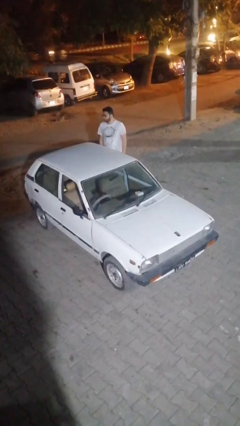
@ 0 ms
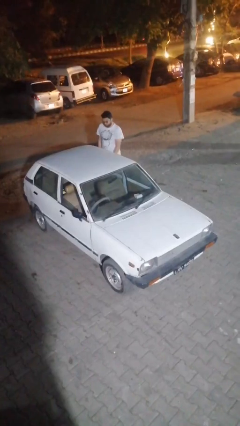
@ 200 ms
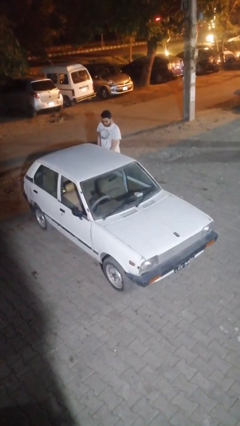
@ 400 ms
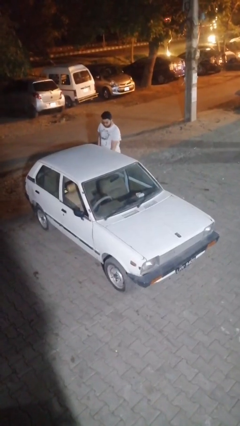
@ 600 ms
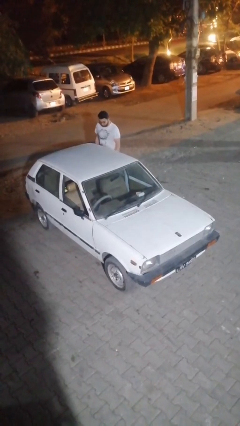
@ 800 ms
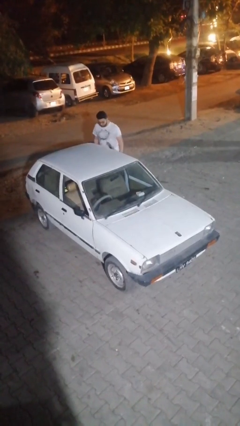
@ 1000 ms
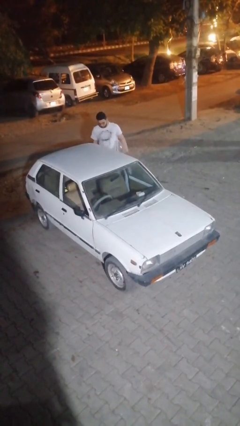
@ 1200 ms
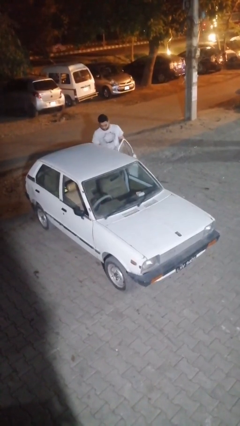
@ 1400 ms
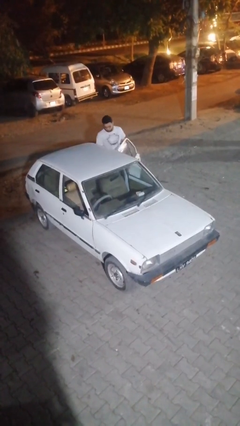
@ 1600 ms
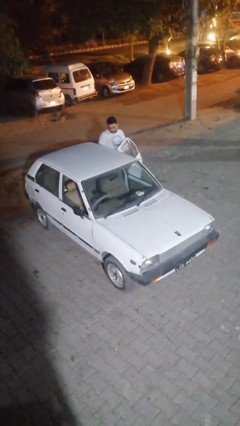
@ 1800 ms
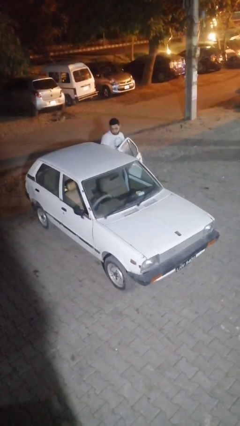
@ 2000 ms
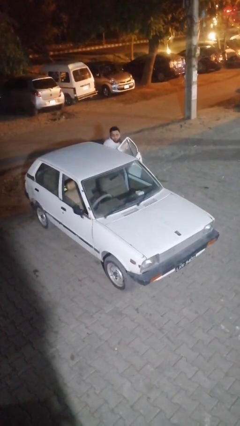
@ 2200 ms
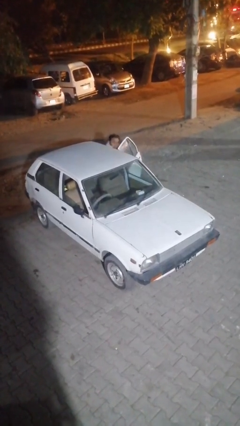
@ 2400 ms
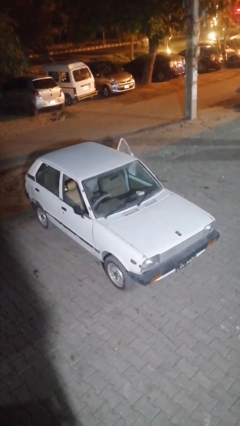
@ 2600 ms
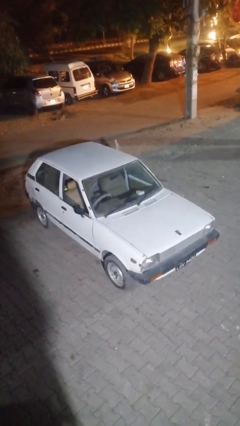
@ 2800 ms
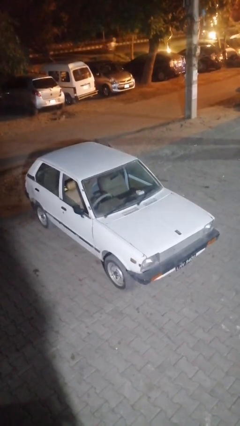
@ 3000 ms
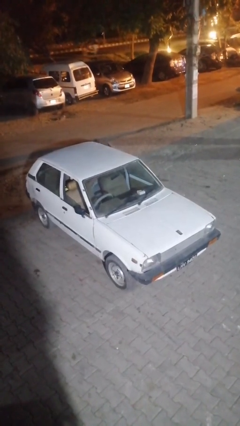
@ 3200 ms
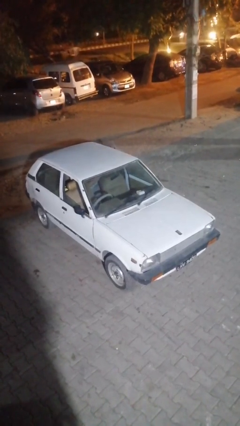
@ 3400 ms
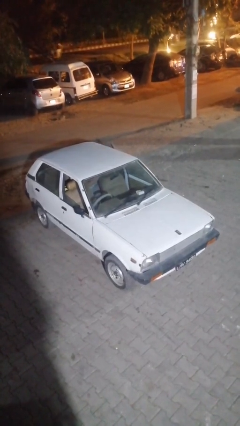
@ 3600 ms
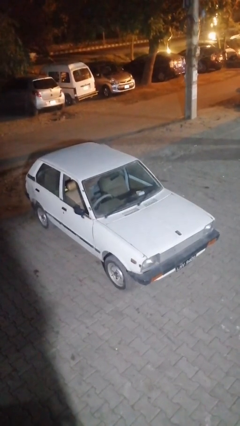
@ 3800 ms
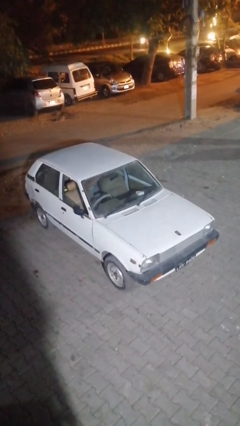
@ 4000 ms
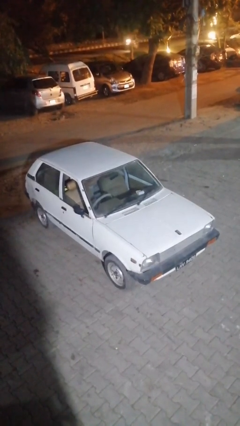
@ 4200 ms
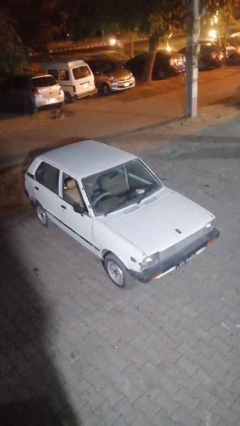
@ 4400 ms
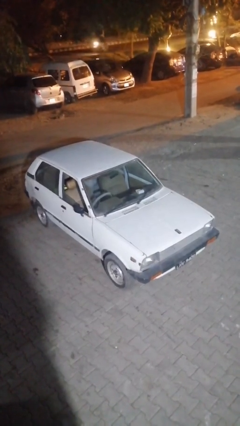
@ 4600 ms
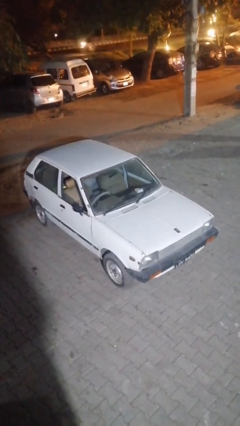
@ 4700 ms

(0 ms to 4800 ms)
car picks up person

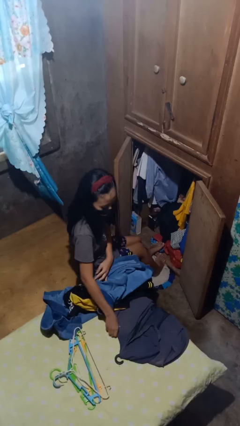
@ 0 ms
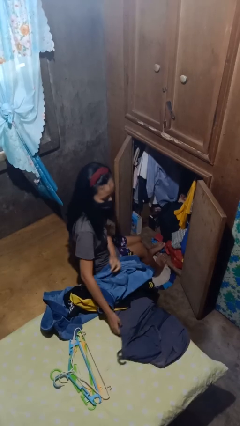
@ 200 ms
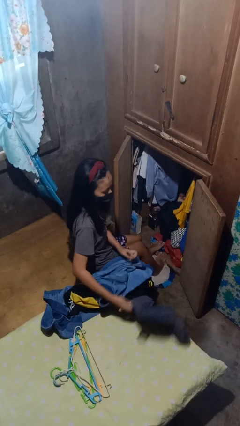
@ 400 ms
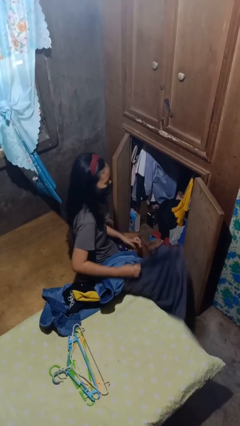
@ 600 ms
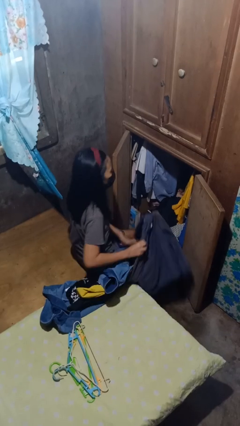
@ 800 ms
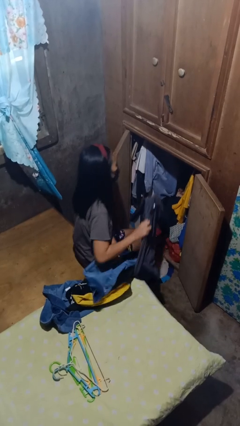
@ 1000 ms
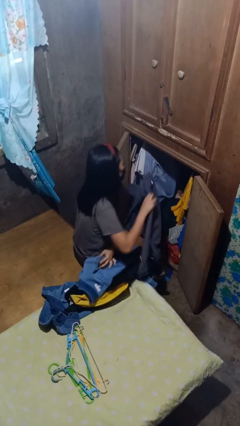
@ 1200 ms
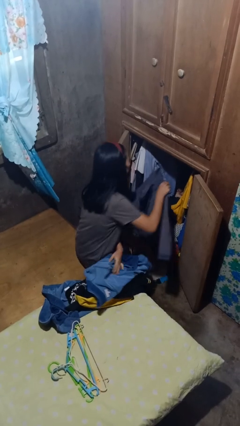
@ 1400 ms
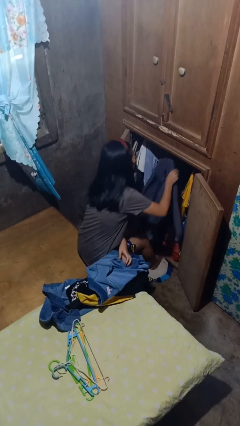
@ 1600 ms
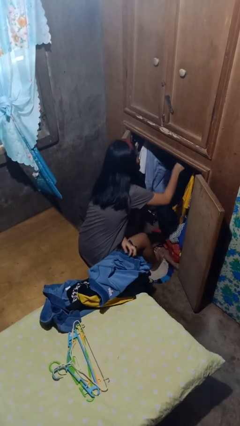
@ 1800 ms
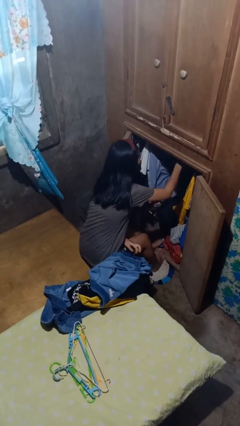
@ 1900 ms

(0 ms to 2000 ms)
person puts clothes into closet

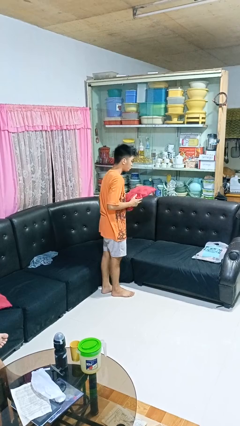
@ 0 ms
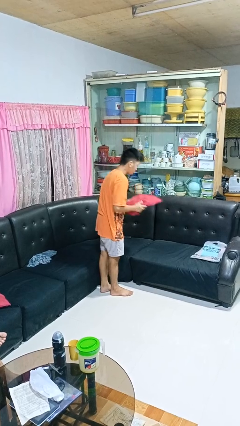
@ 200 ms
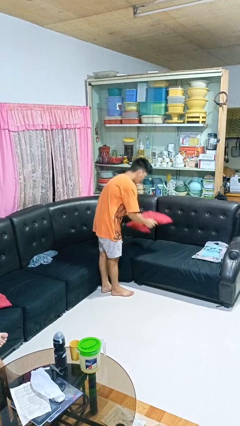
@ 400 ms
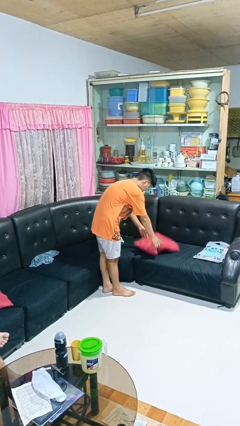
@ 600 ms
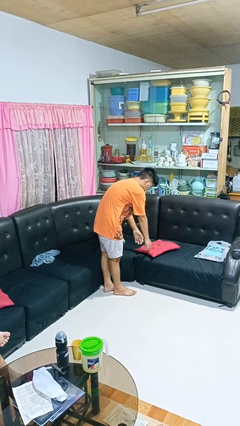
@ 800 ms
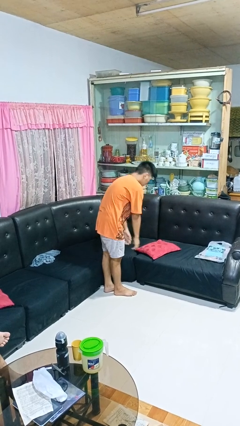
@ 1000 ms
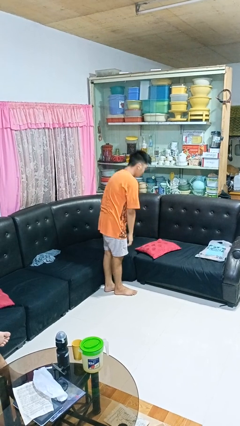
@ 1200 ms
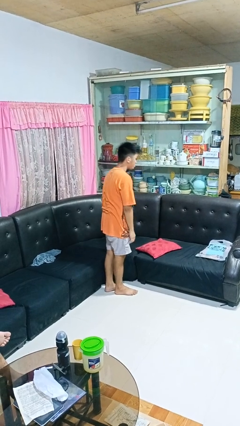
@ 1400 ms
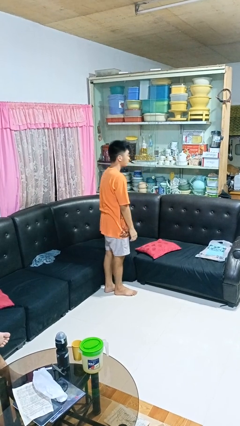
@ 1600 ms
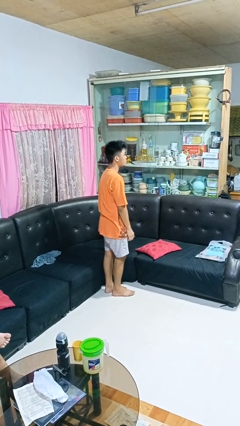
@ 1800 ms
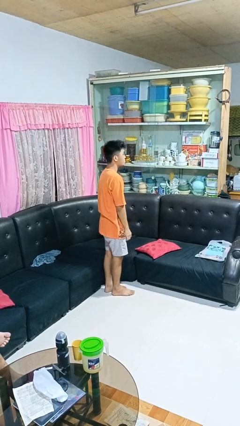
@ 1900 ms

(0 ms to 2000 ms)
person puts down object on couch

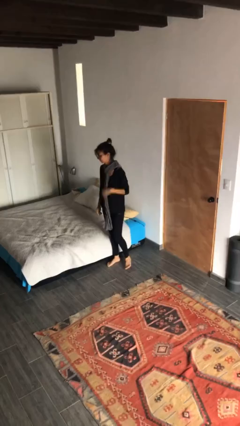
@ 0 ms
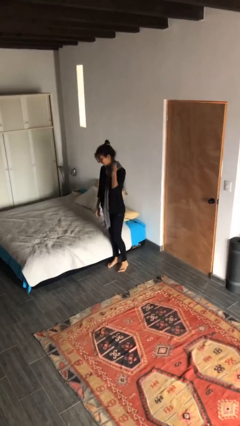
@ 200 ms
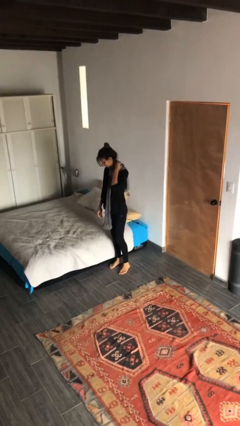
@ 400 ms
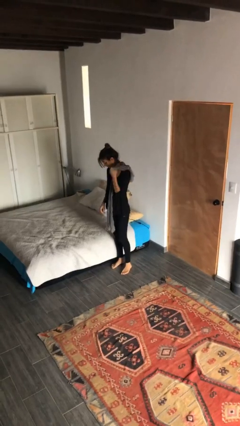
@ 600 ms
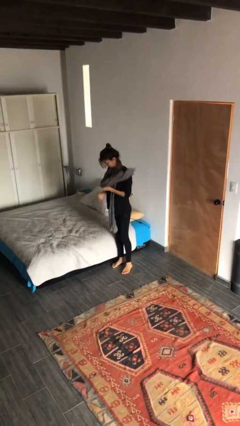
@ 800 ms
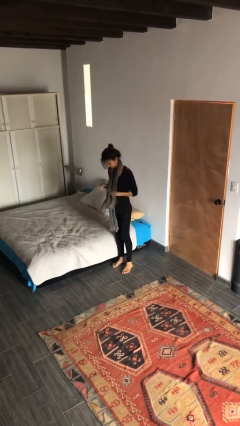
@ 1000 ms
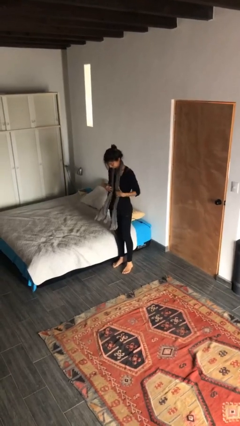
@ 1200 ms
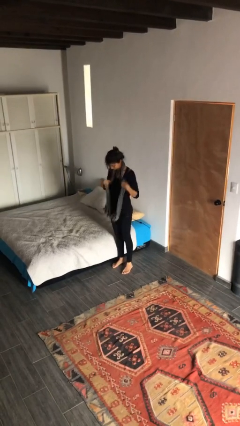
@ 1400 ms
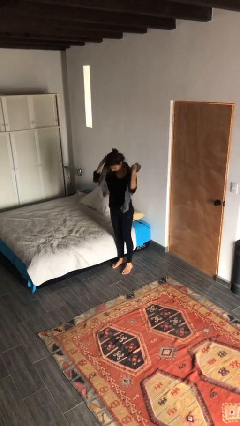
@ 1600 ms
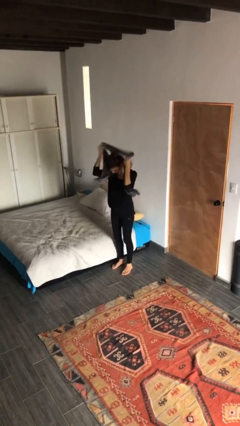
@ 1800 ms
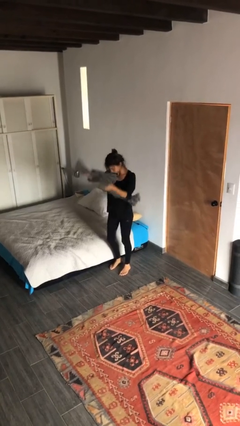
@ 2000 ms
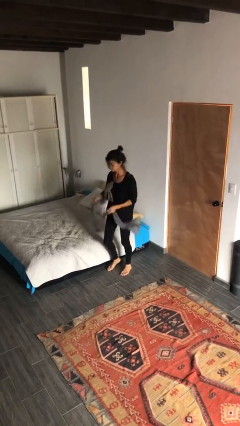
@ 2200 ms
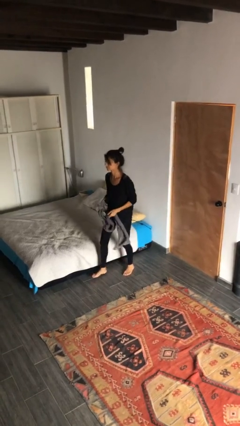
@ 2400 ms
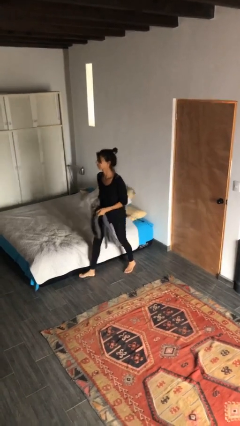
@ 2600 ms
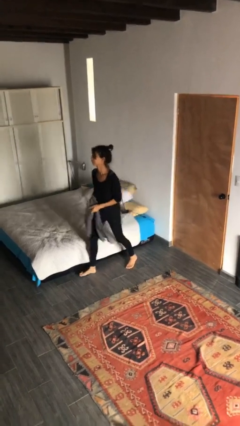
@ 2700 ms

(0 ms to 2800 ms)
person takes off scarf

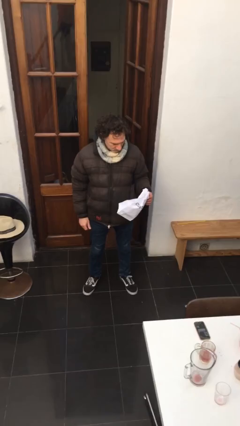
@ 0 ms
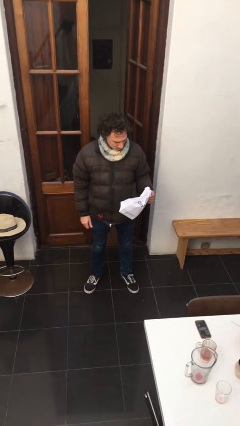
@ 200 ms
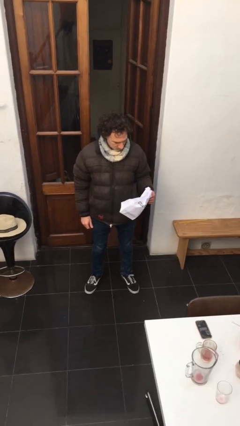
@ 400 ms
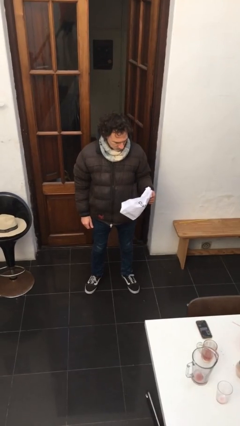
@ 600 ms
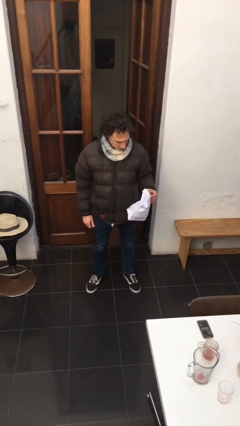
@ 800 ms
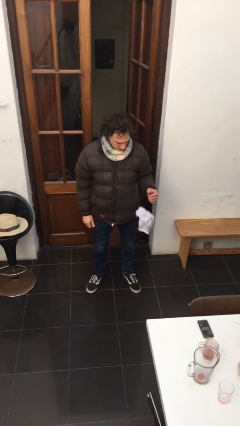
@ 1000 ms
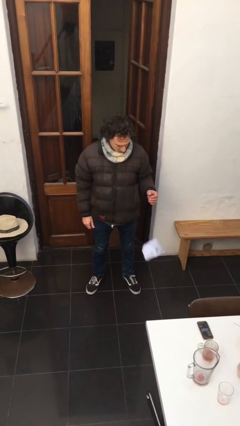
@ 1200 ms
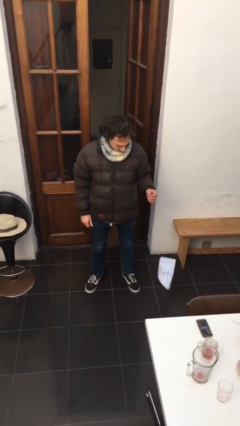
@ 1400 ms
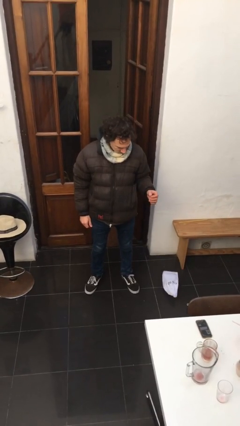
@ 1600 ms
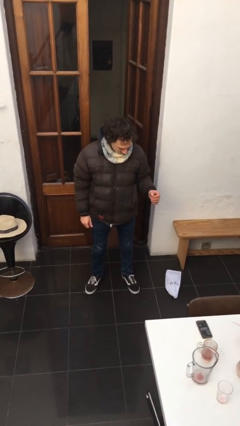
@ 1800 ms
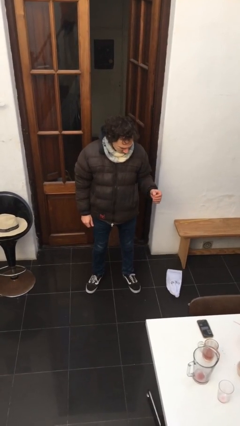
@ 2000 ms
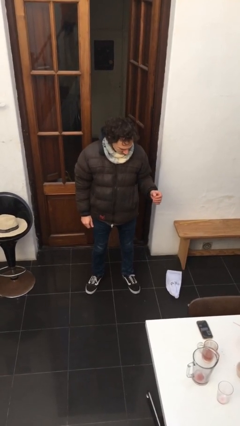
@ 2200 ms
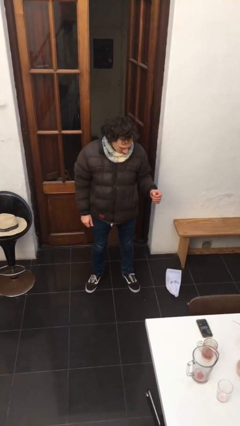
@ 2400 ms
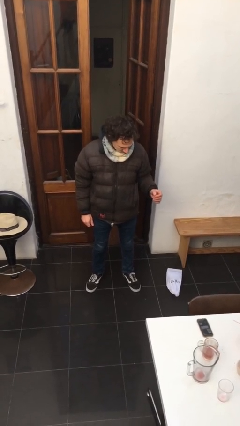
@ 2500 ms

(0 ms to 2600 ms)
person drops object

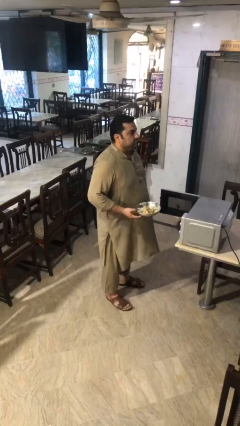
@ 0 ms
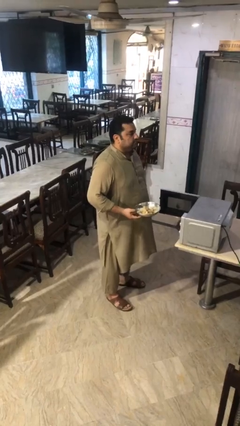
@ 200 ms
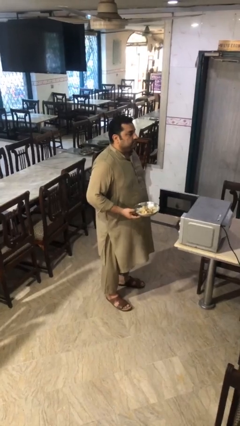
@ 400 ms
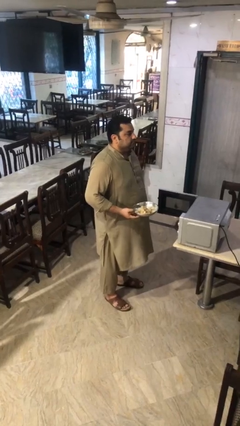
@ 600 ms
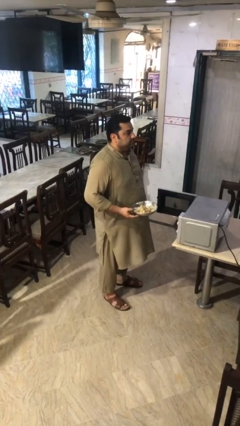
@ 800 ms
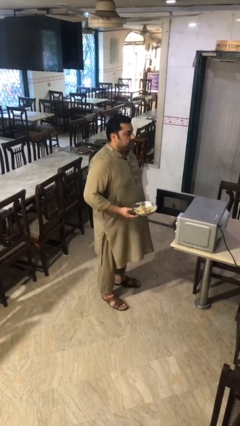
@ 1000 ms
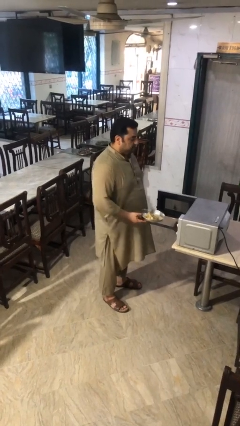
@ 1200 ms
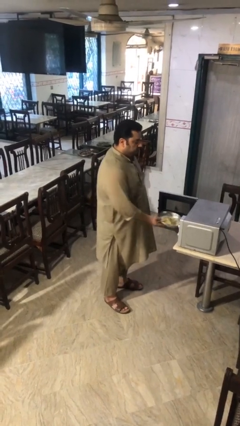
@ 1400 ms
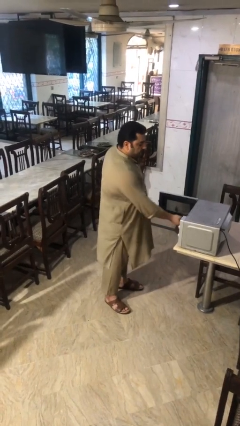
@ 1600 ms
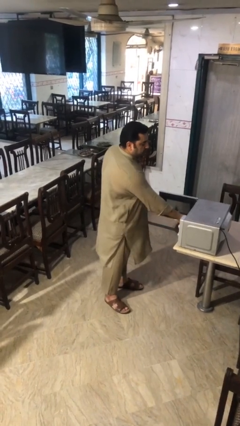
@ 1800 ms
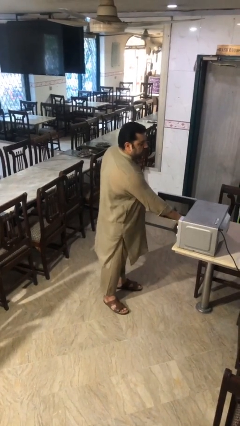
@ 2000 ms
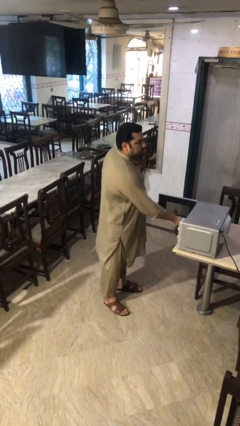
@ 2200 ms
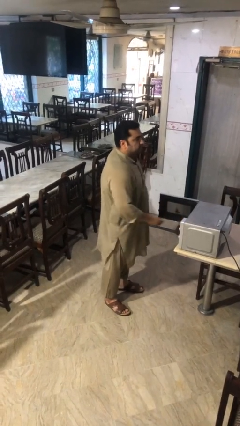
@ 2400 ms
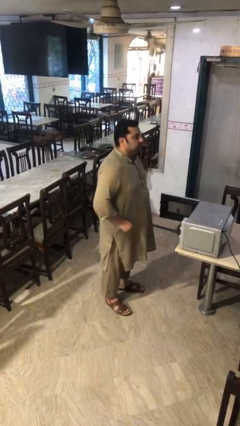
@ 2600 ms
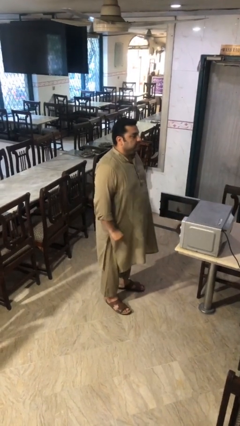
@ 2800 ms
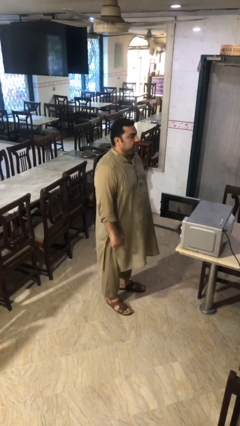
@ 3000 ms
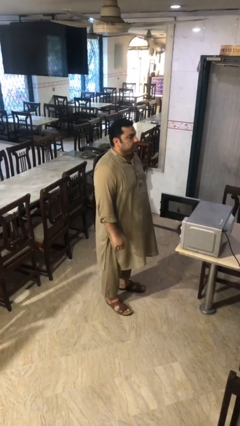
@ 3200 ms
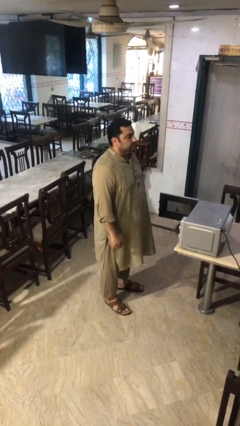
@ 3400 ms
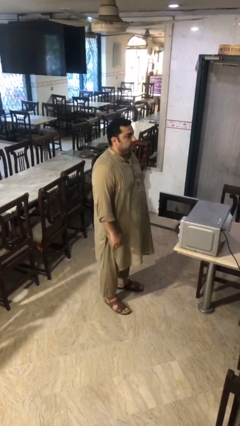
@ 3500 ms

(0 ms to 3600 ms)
person puts object into microwave
